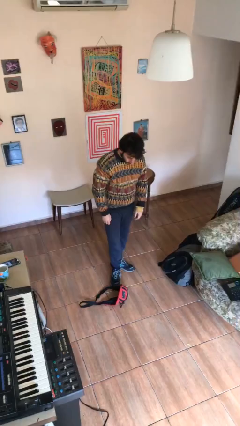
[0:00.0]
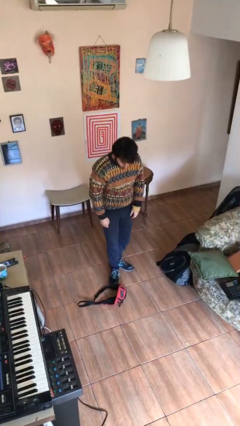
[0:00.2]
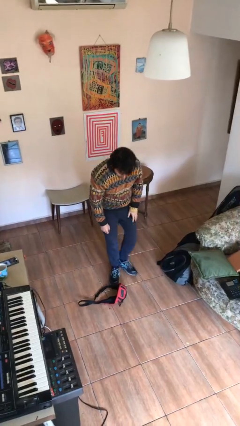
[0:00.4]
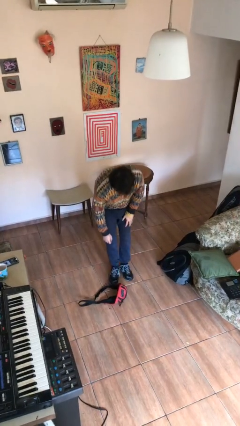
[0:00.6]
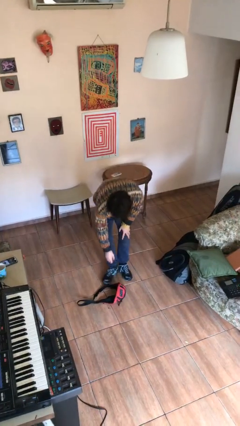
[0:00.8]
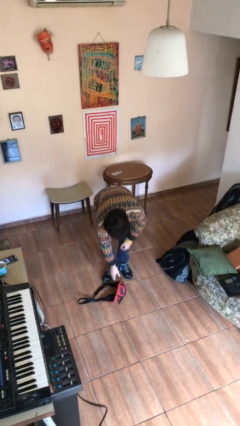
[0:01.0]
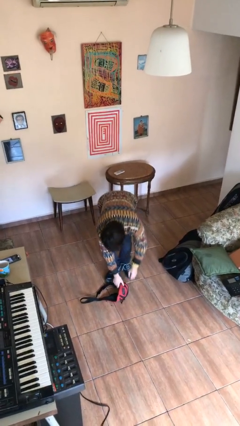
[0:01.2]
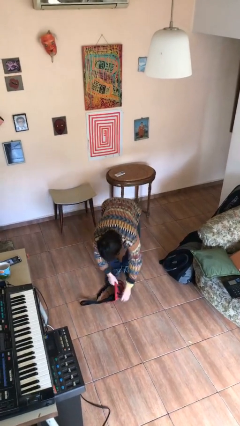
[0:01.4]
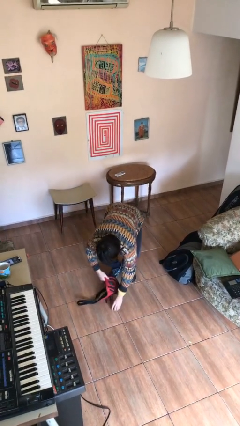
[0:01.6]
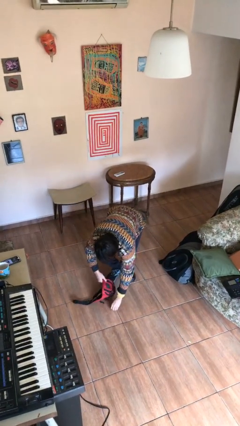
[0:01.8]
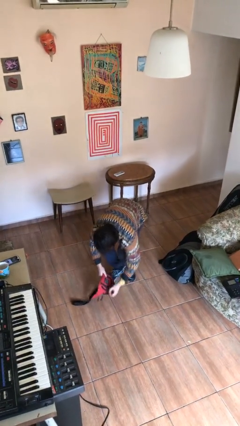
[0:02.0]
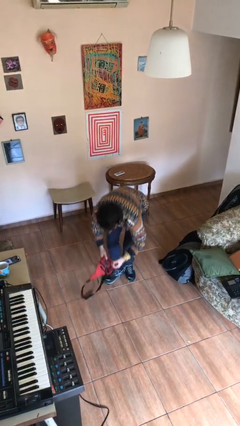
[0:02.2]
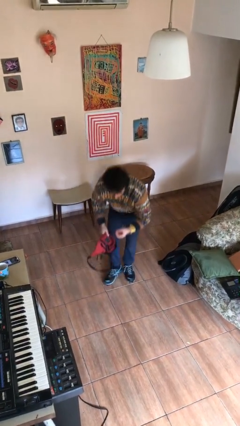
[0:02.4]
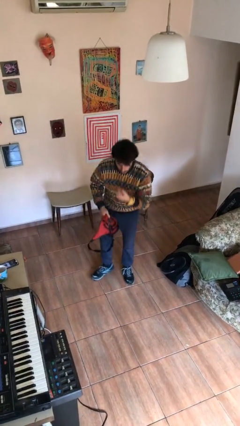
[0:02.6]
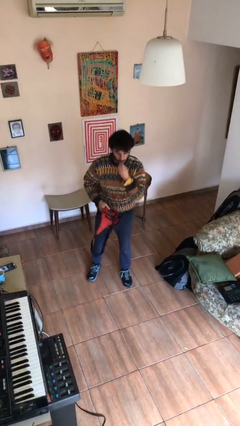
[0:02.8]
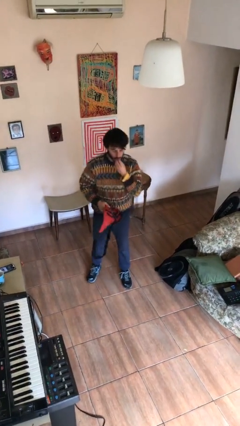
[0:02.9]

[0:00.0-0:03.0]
person picks up object from floor

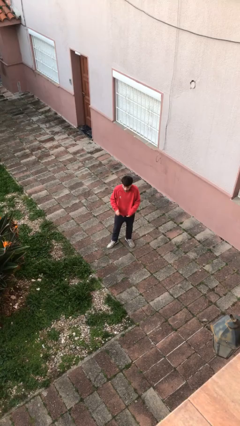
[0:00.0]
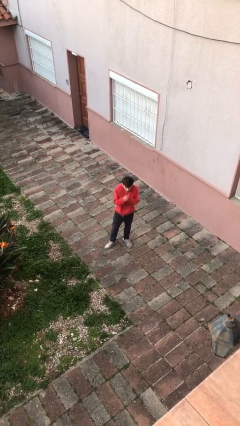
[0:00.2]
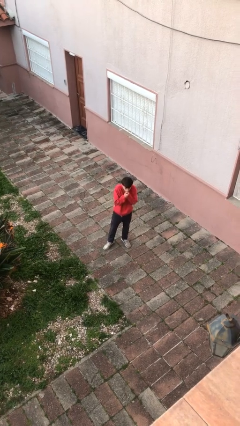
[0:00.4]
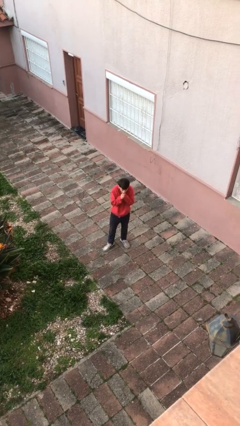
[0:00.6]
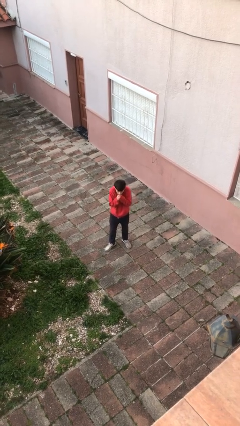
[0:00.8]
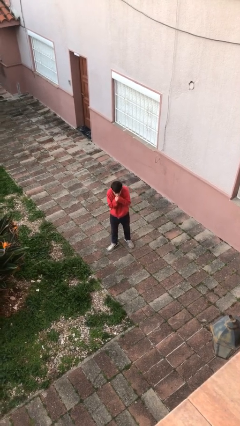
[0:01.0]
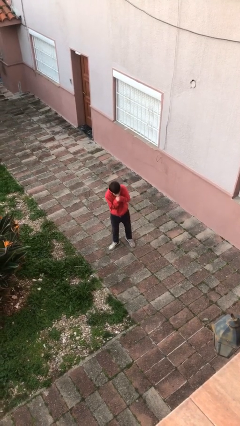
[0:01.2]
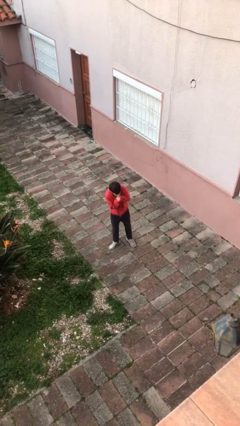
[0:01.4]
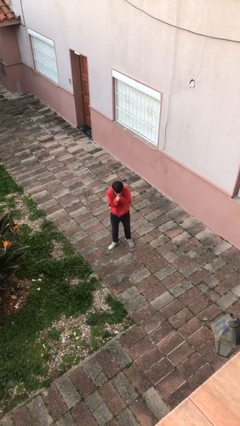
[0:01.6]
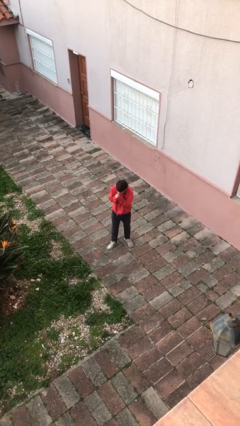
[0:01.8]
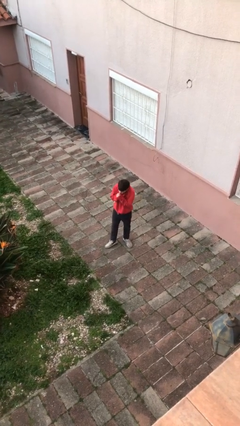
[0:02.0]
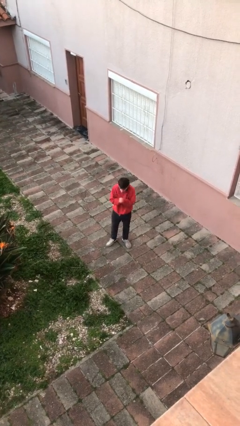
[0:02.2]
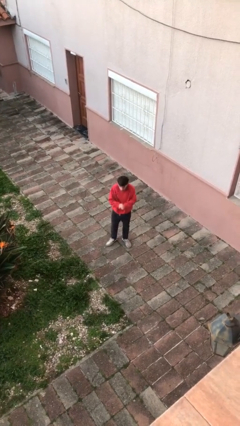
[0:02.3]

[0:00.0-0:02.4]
person blows into hands

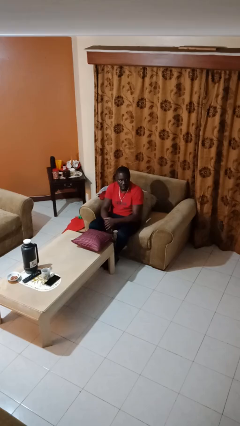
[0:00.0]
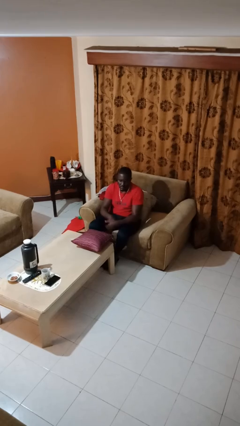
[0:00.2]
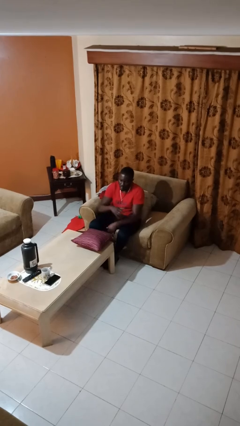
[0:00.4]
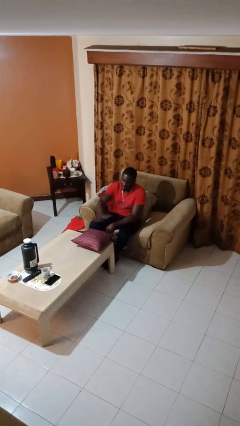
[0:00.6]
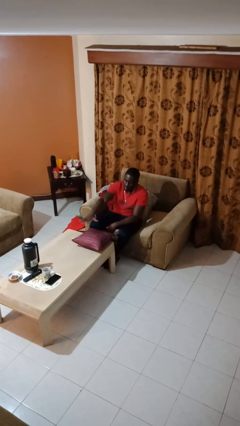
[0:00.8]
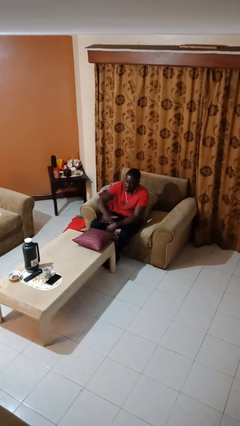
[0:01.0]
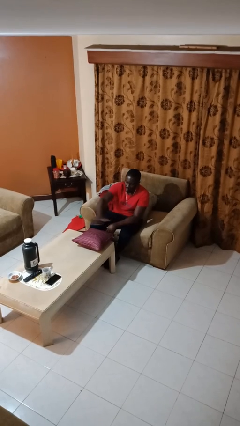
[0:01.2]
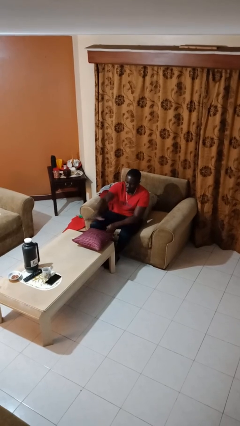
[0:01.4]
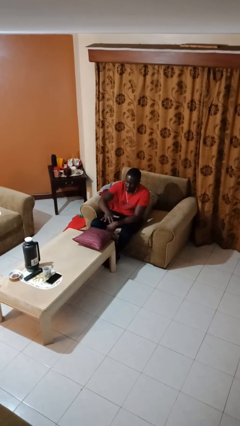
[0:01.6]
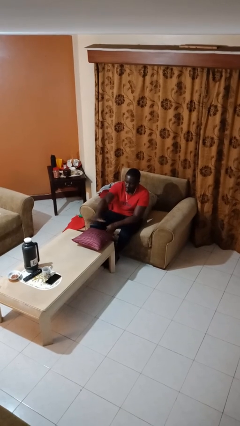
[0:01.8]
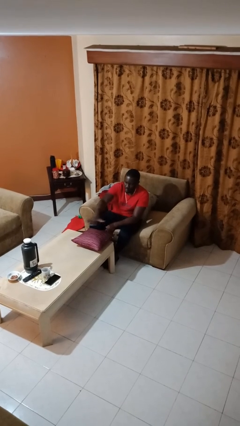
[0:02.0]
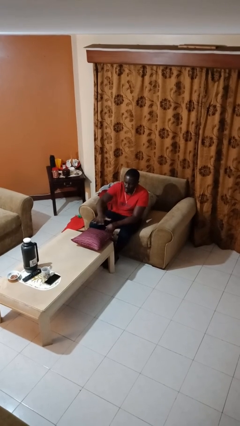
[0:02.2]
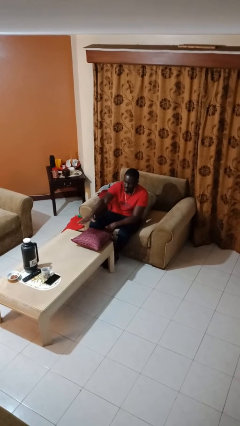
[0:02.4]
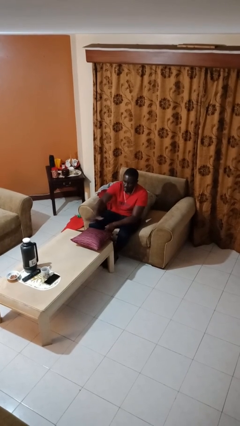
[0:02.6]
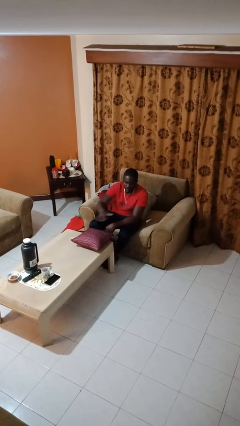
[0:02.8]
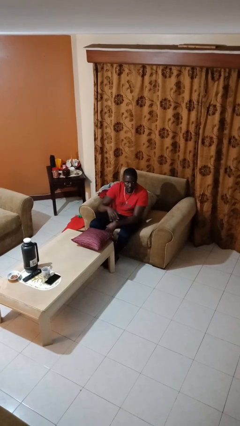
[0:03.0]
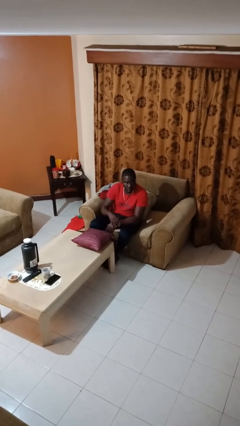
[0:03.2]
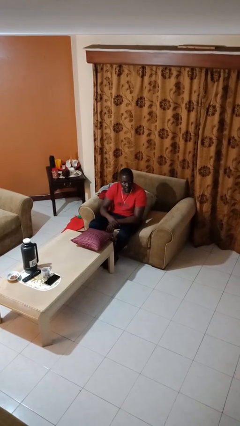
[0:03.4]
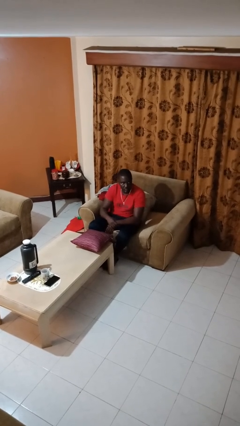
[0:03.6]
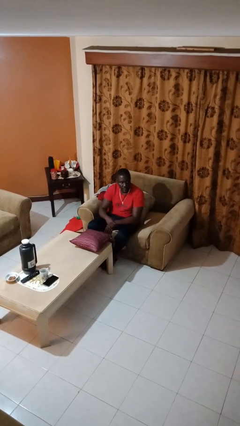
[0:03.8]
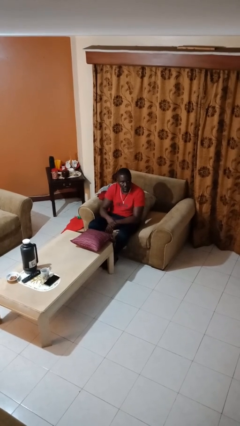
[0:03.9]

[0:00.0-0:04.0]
person waves hand over object

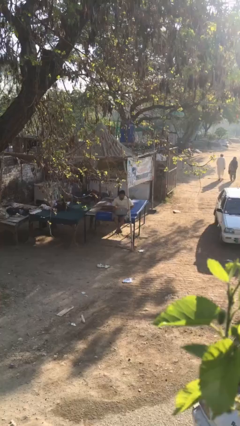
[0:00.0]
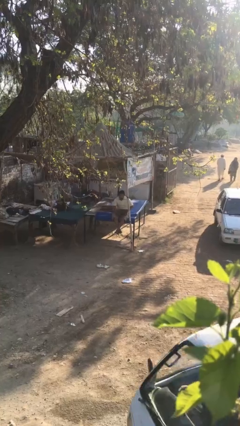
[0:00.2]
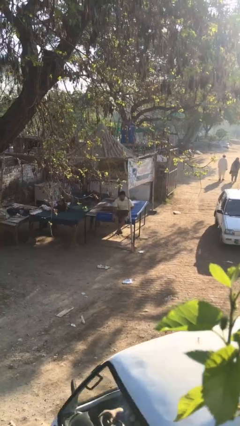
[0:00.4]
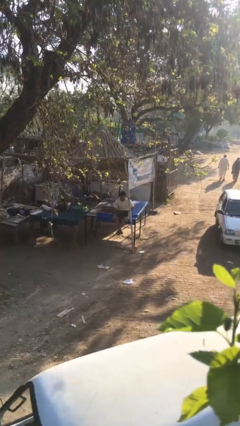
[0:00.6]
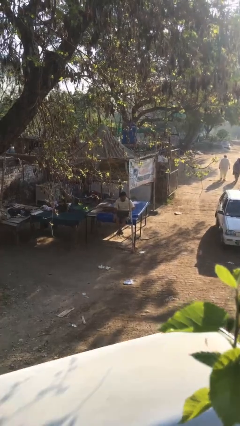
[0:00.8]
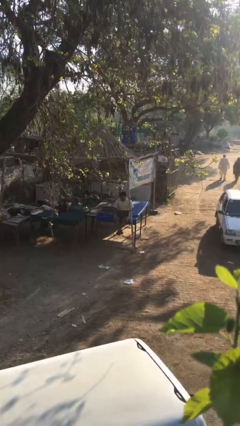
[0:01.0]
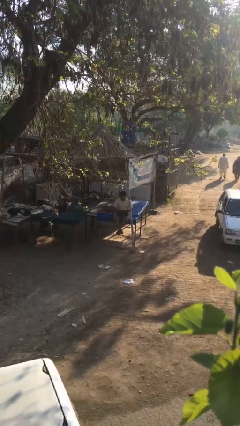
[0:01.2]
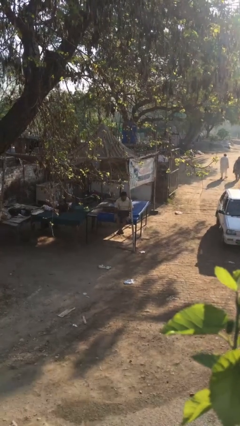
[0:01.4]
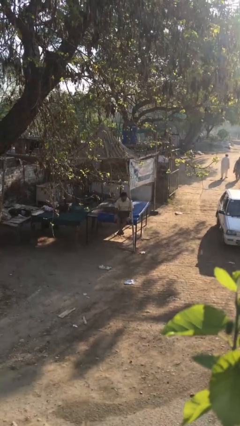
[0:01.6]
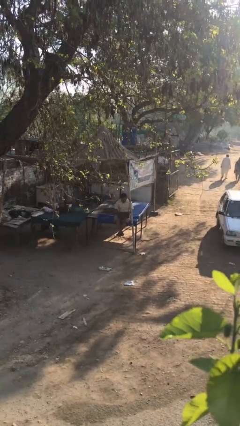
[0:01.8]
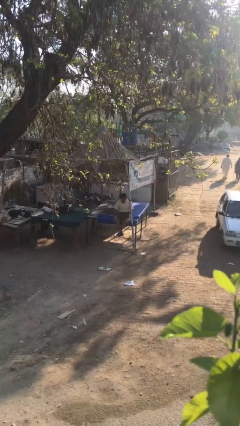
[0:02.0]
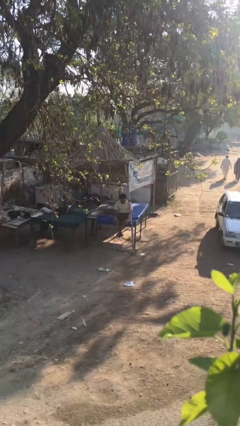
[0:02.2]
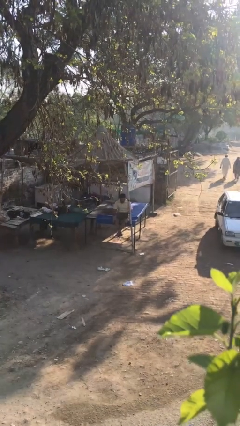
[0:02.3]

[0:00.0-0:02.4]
person interacts with laptop

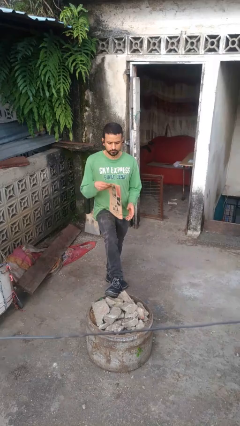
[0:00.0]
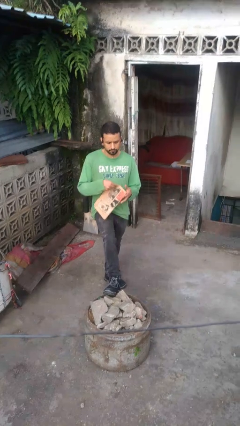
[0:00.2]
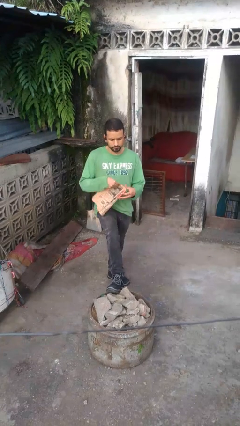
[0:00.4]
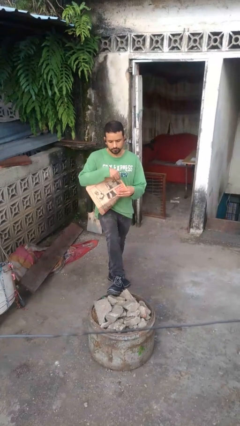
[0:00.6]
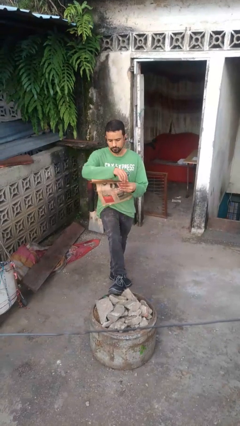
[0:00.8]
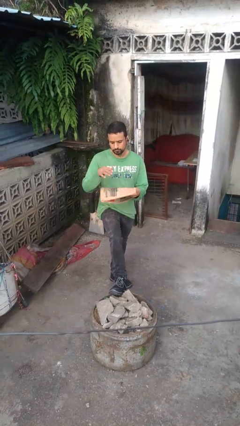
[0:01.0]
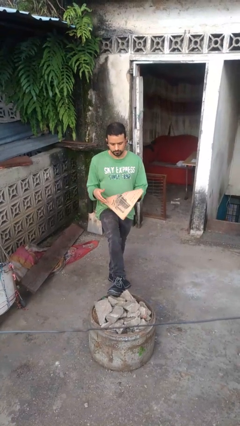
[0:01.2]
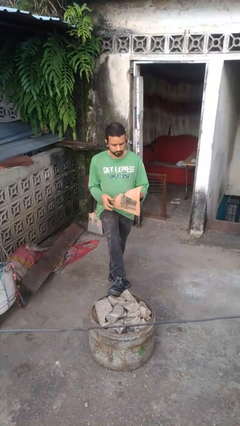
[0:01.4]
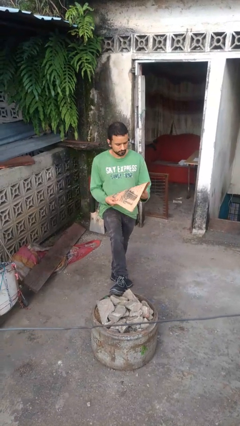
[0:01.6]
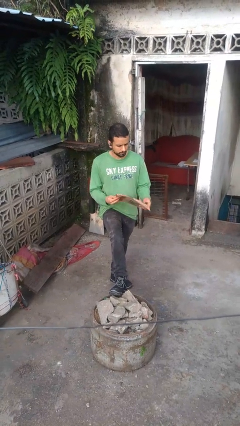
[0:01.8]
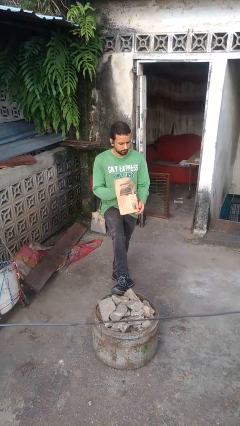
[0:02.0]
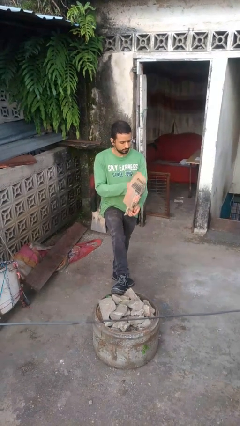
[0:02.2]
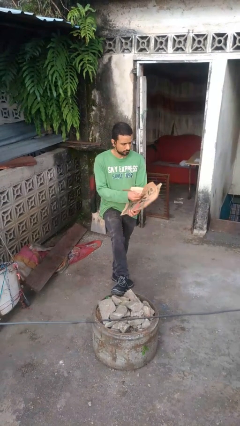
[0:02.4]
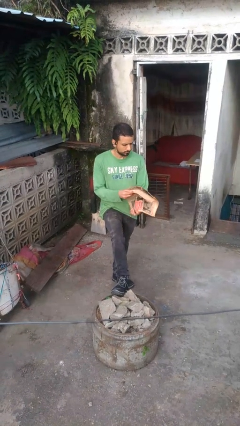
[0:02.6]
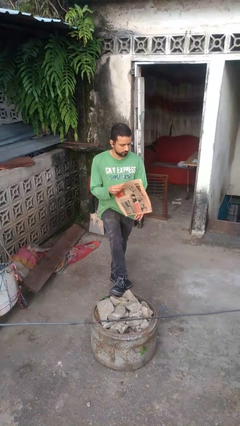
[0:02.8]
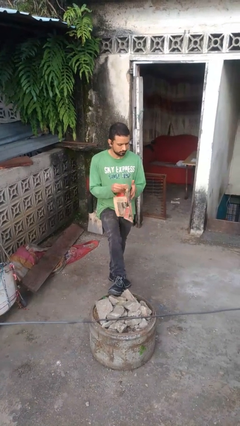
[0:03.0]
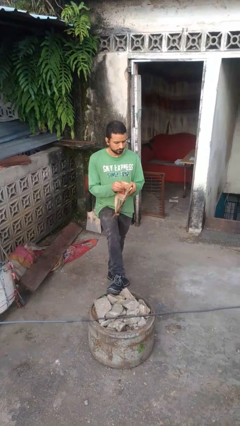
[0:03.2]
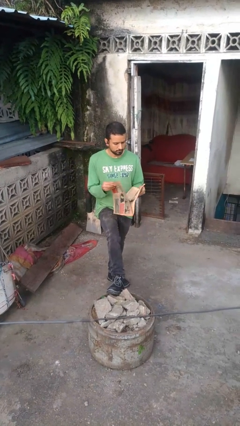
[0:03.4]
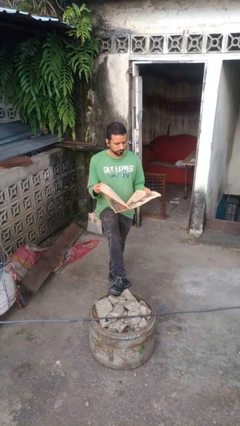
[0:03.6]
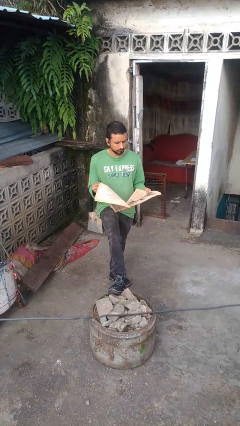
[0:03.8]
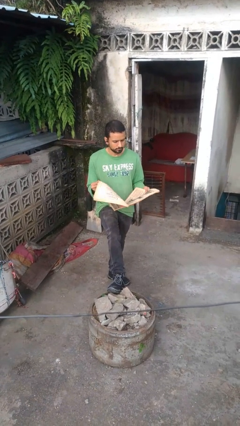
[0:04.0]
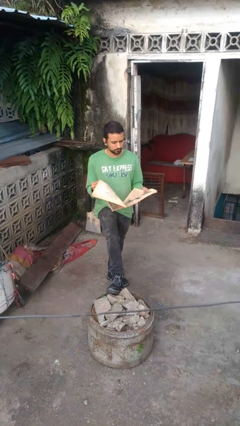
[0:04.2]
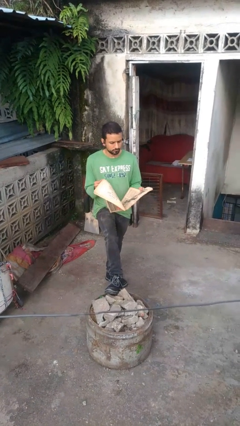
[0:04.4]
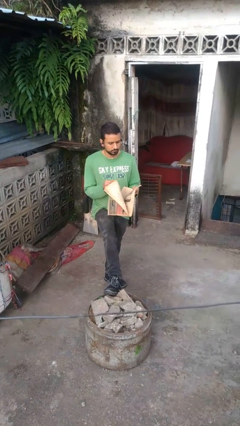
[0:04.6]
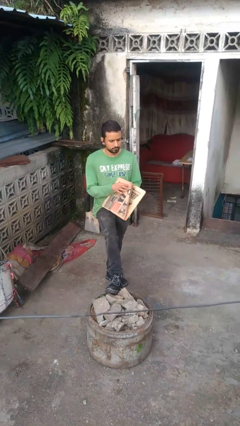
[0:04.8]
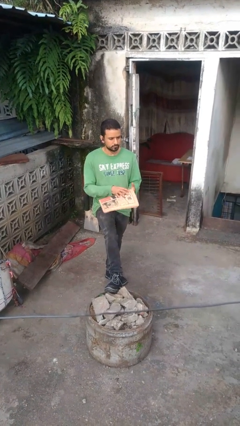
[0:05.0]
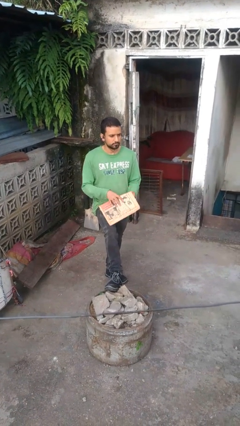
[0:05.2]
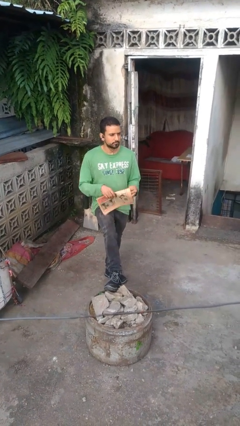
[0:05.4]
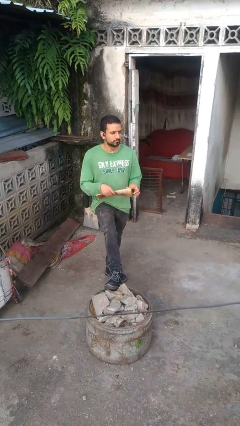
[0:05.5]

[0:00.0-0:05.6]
person reads newspaper
